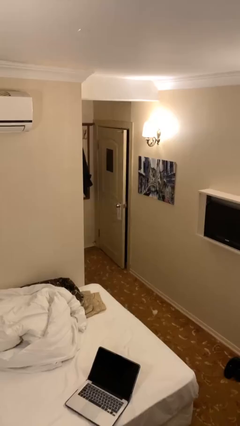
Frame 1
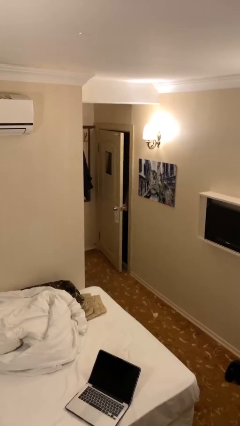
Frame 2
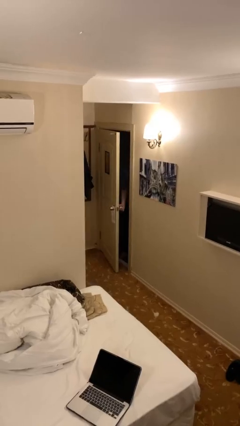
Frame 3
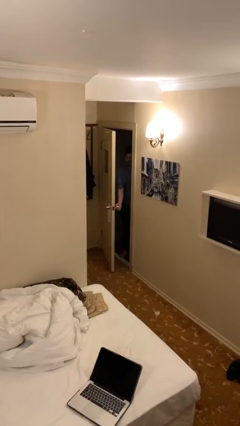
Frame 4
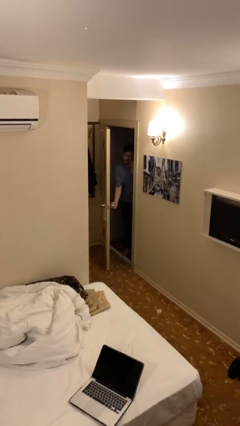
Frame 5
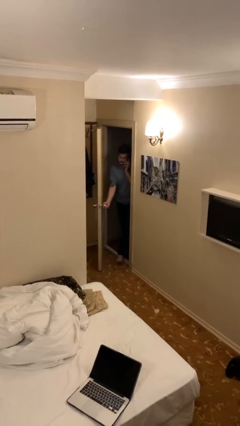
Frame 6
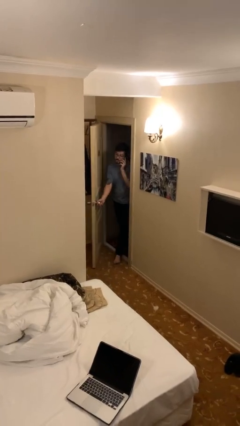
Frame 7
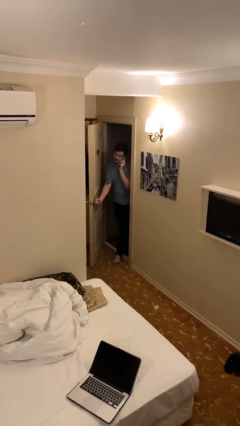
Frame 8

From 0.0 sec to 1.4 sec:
person opens facility door

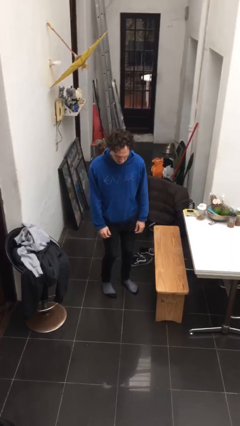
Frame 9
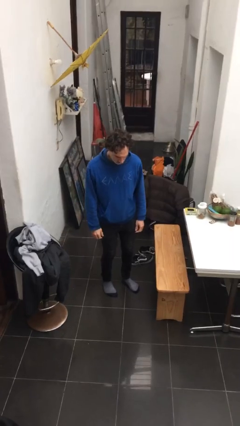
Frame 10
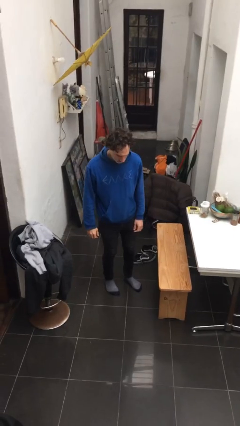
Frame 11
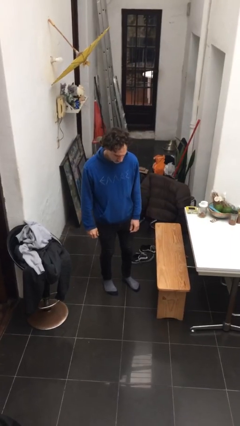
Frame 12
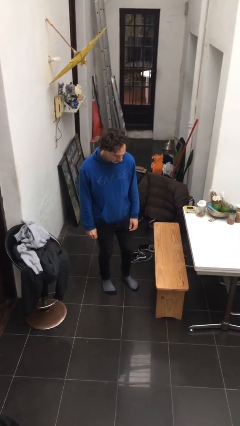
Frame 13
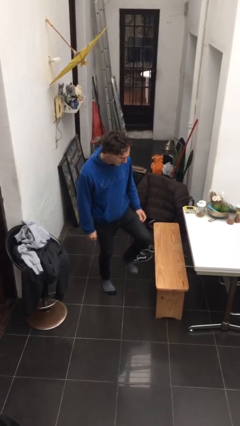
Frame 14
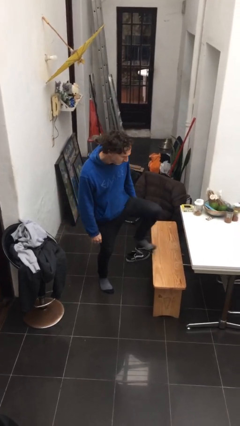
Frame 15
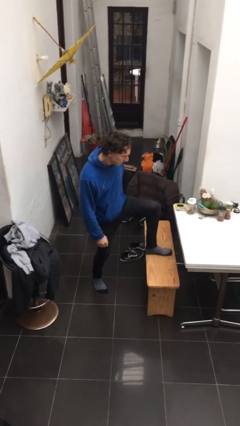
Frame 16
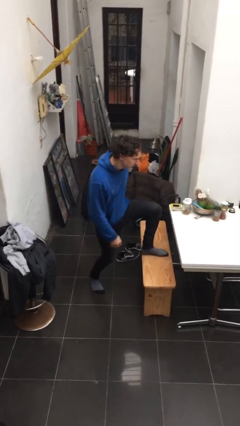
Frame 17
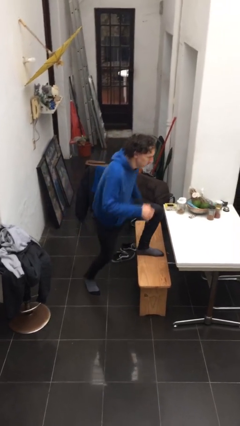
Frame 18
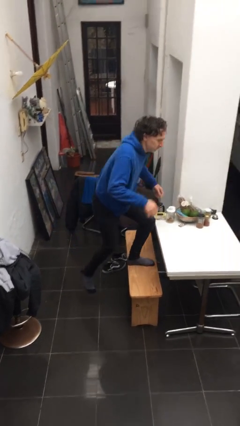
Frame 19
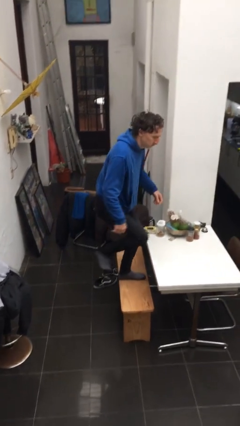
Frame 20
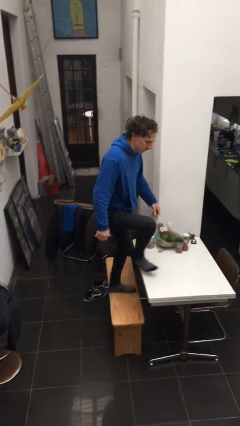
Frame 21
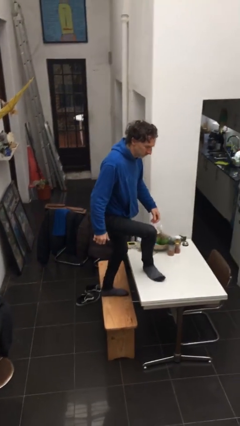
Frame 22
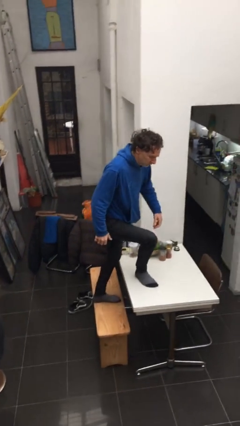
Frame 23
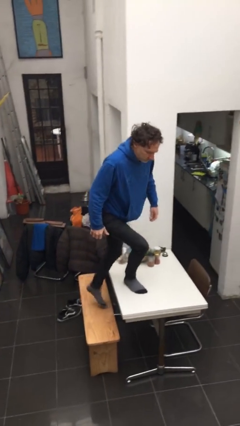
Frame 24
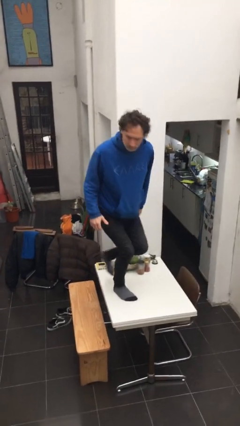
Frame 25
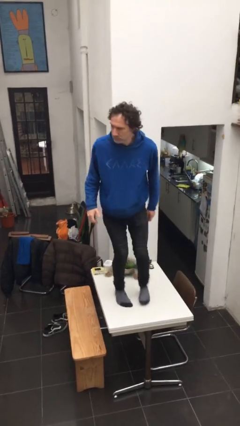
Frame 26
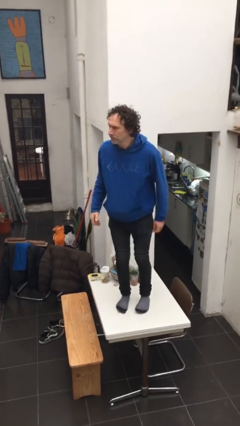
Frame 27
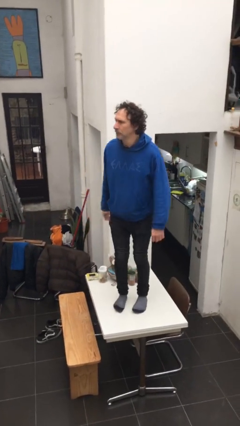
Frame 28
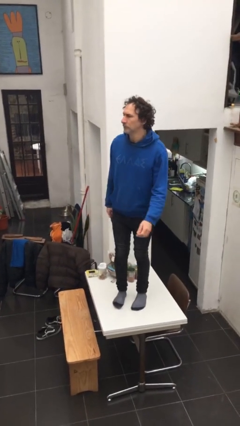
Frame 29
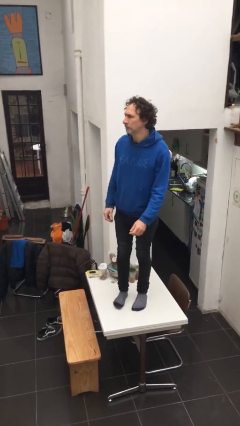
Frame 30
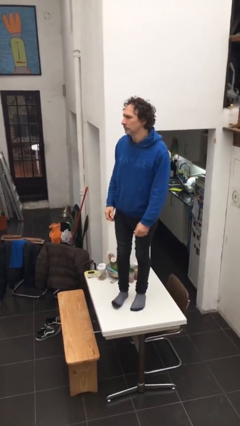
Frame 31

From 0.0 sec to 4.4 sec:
person climbs on table

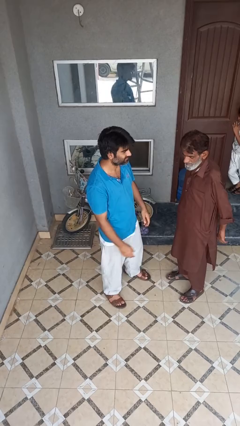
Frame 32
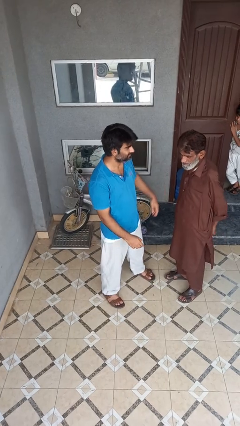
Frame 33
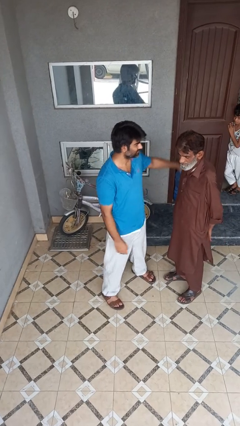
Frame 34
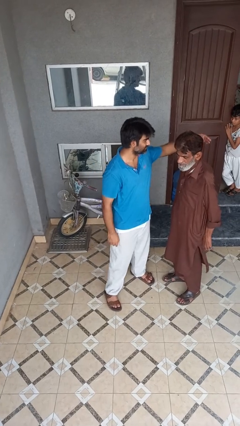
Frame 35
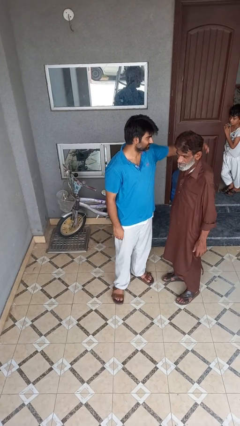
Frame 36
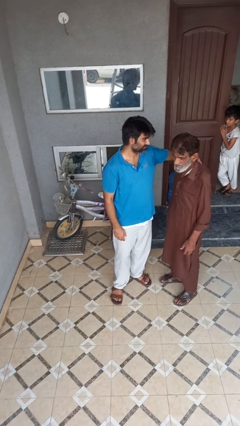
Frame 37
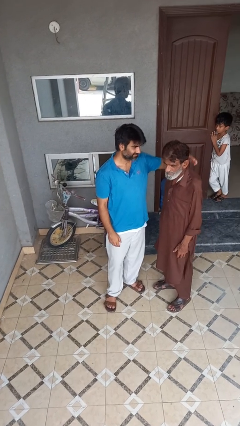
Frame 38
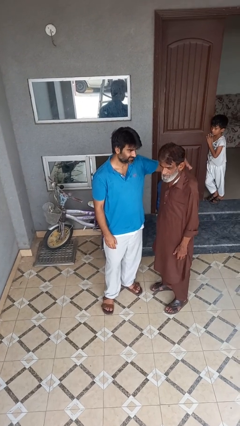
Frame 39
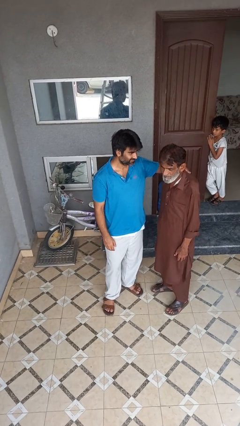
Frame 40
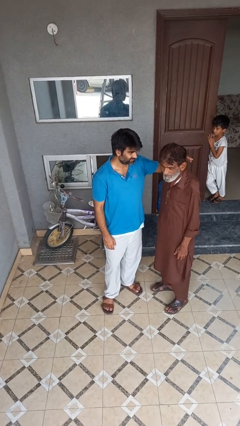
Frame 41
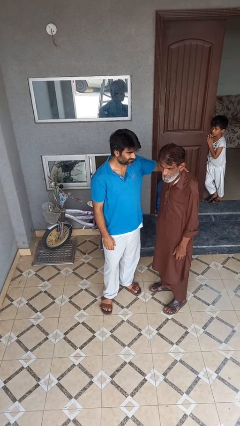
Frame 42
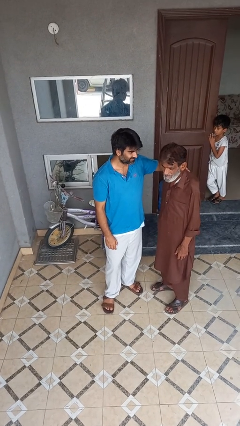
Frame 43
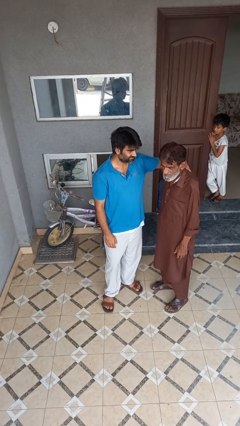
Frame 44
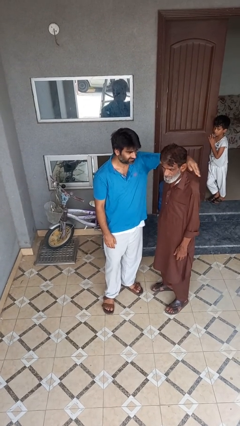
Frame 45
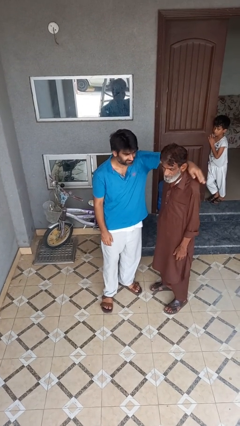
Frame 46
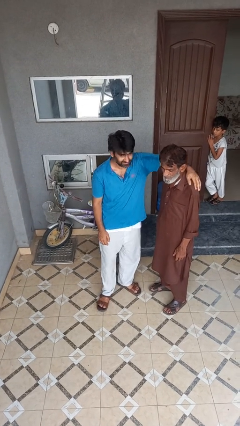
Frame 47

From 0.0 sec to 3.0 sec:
person pounds shoulders of person

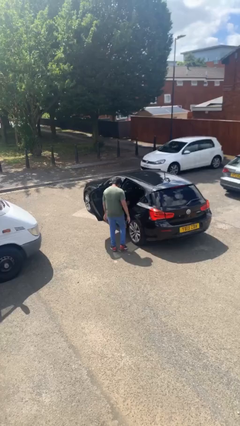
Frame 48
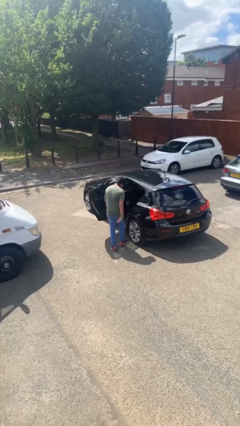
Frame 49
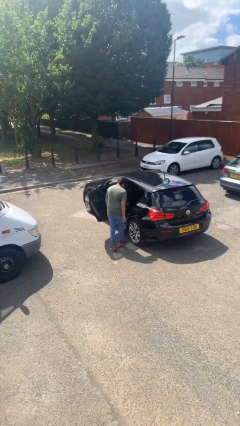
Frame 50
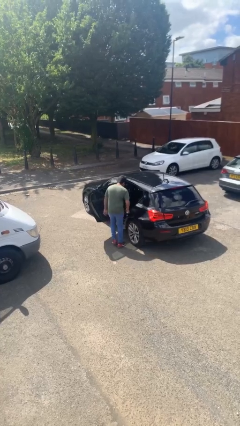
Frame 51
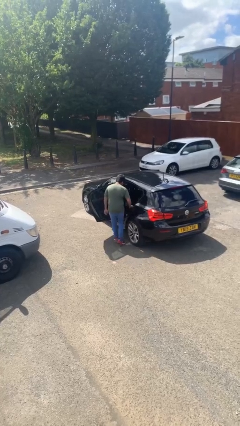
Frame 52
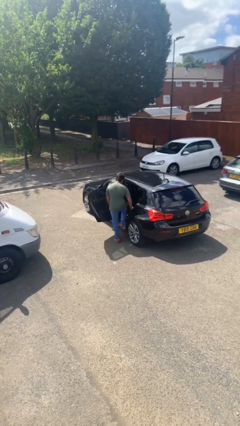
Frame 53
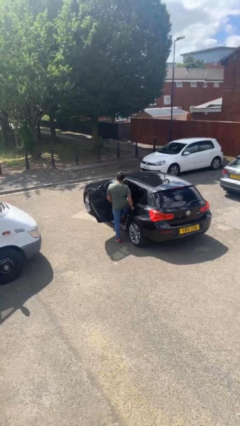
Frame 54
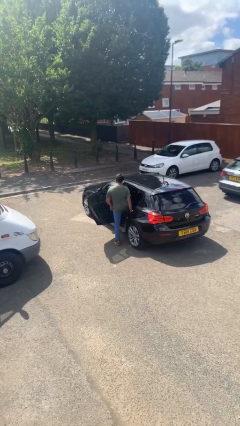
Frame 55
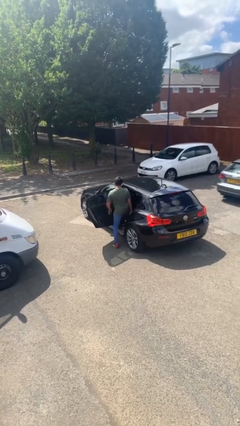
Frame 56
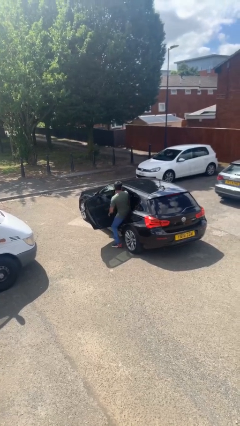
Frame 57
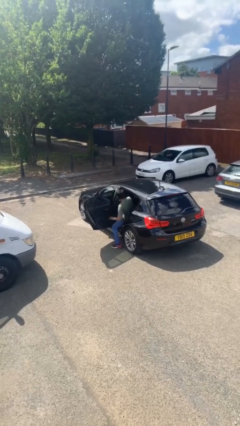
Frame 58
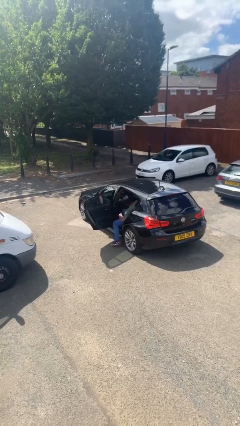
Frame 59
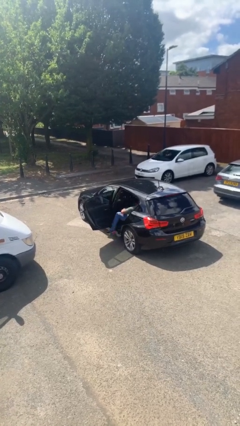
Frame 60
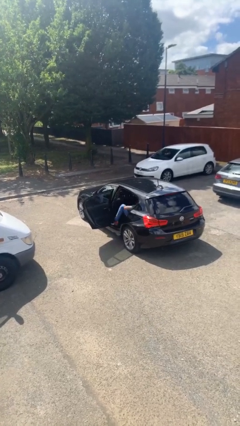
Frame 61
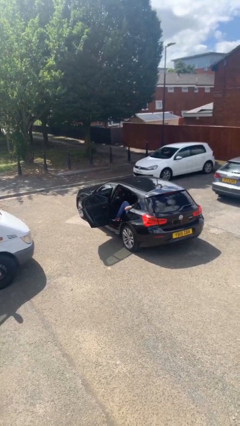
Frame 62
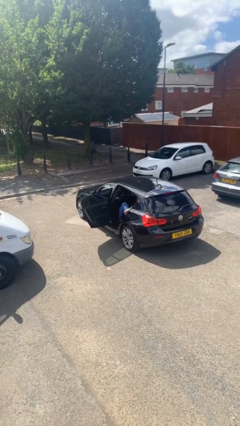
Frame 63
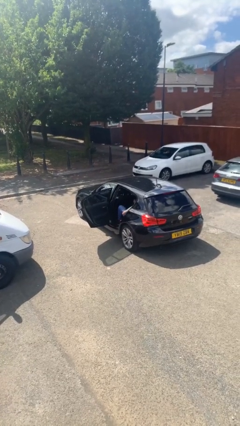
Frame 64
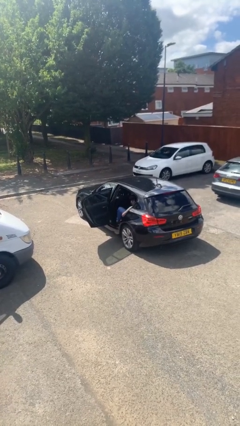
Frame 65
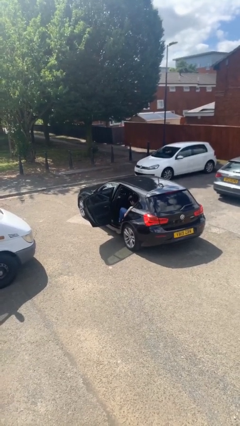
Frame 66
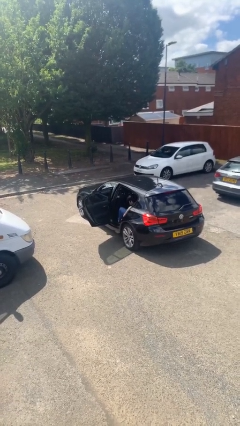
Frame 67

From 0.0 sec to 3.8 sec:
person enters car

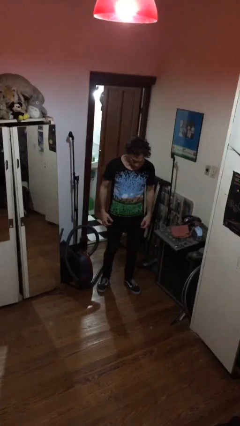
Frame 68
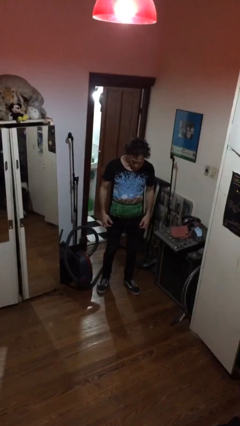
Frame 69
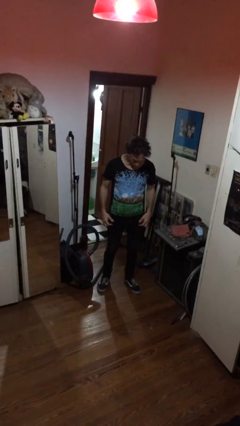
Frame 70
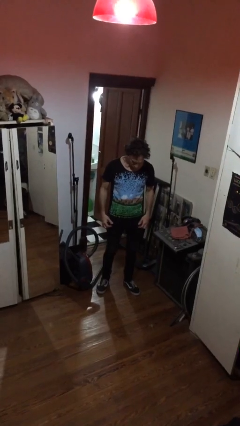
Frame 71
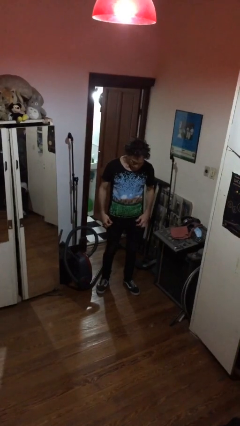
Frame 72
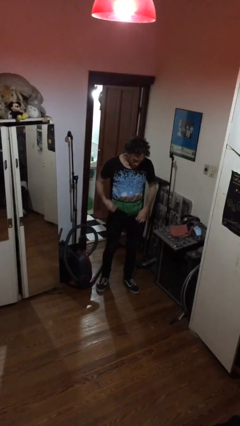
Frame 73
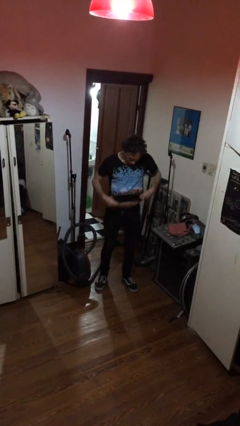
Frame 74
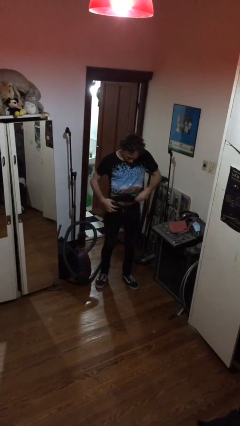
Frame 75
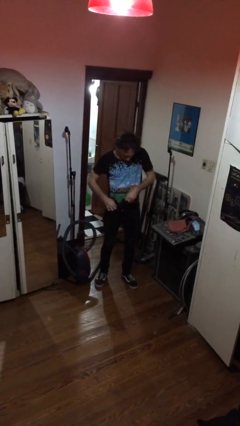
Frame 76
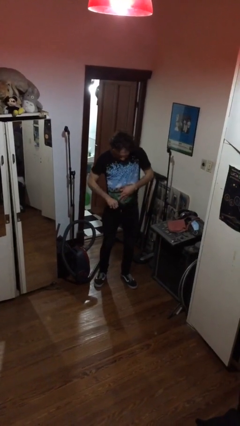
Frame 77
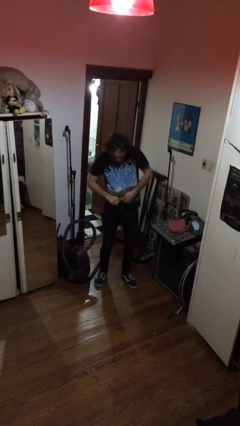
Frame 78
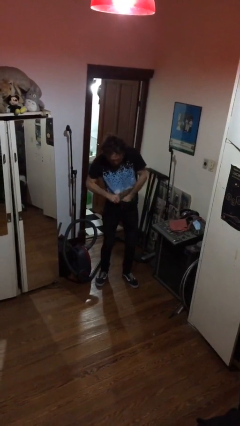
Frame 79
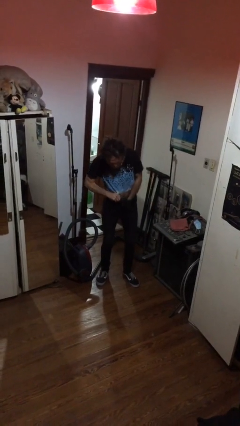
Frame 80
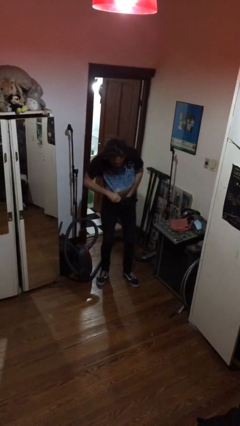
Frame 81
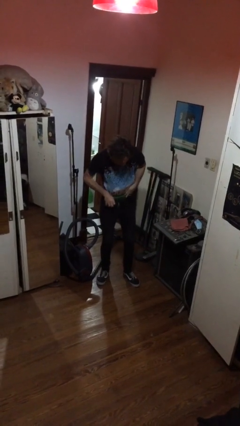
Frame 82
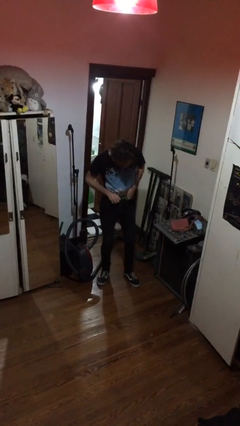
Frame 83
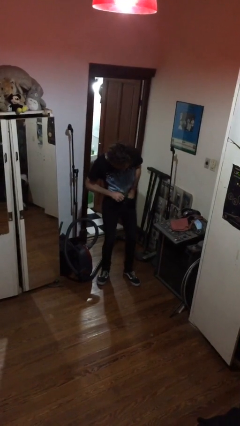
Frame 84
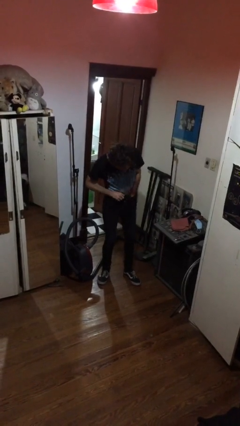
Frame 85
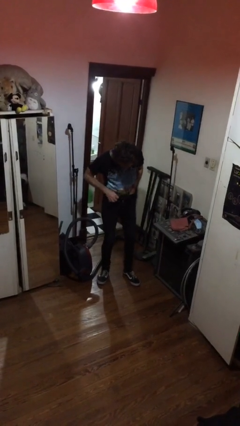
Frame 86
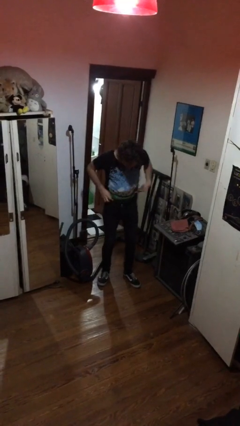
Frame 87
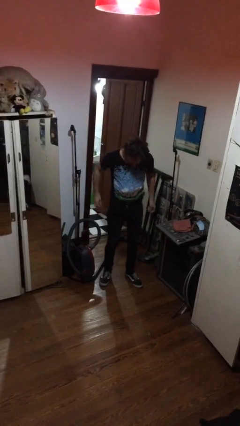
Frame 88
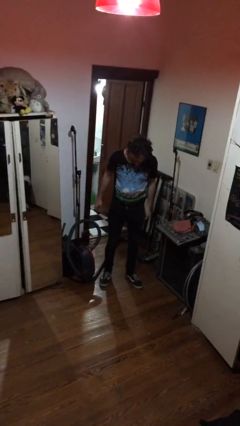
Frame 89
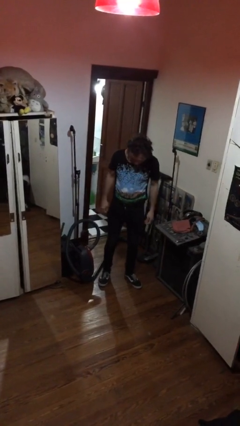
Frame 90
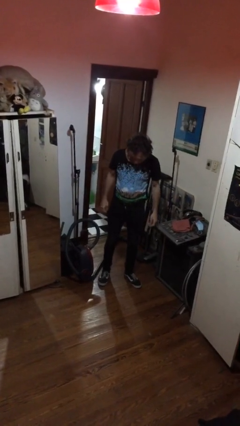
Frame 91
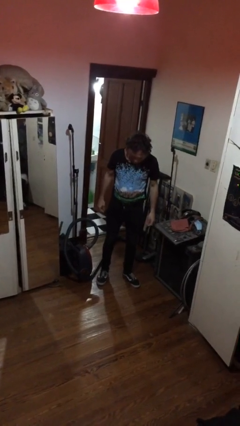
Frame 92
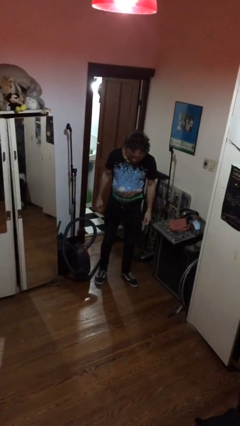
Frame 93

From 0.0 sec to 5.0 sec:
person tucks in shirt
